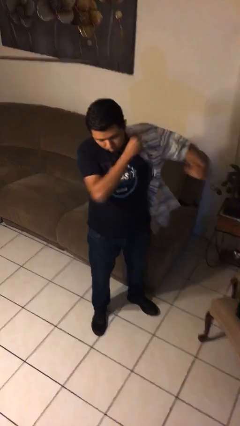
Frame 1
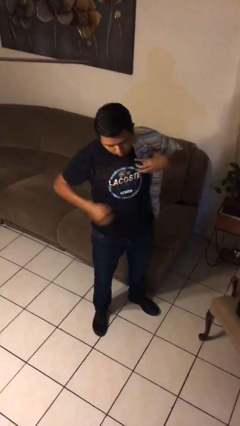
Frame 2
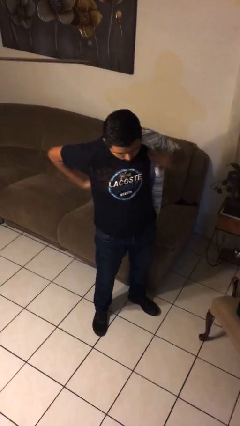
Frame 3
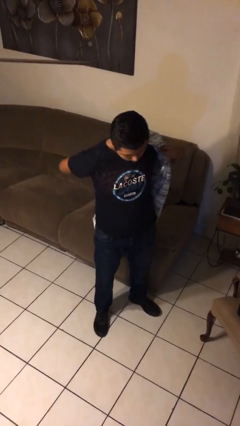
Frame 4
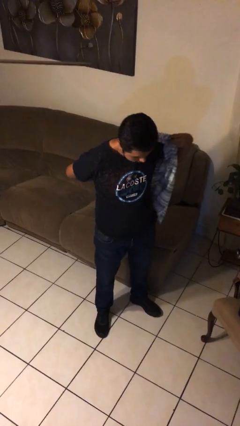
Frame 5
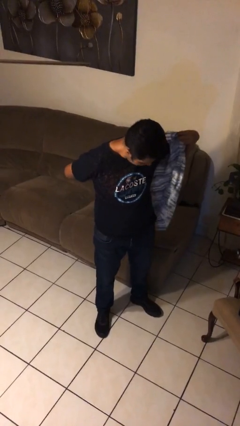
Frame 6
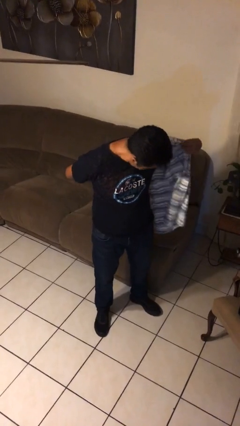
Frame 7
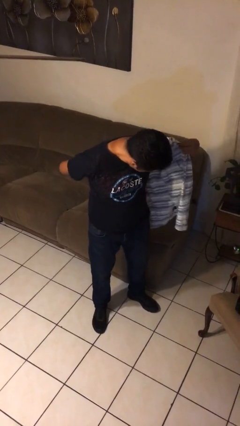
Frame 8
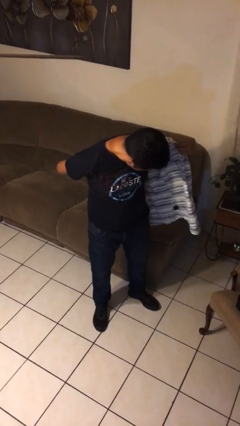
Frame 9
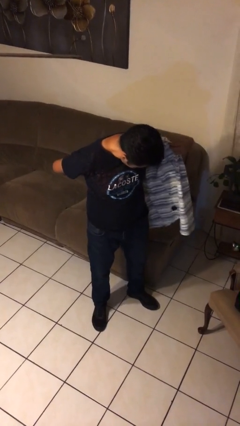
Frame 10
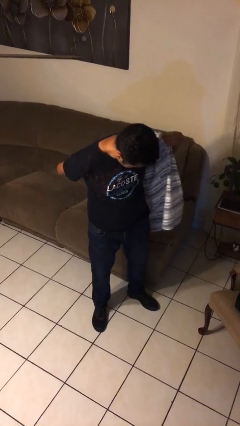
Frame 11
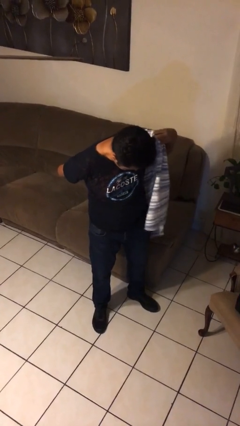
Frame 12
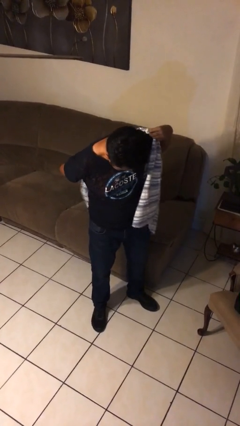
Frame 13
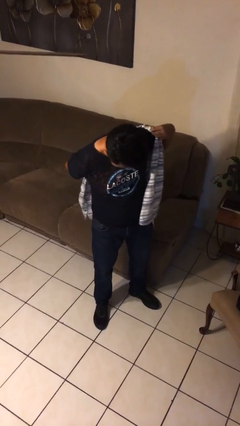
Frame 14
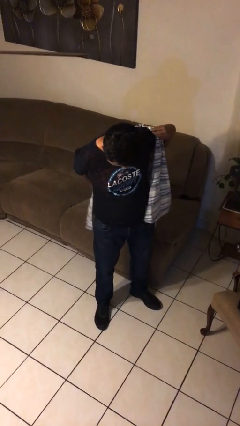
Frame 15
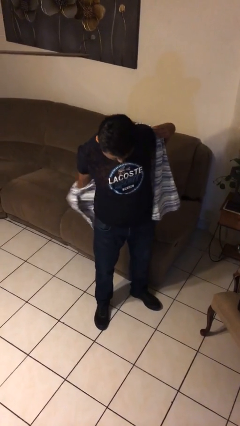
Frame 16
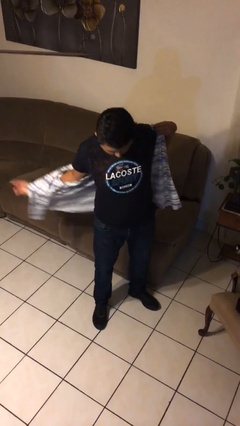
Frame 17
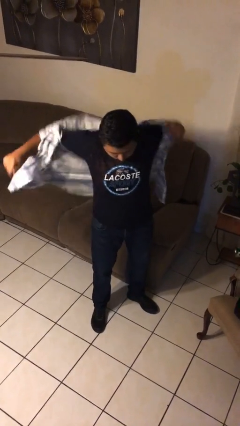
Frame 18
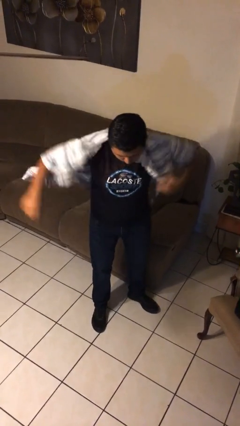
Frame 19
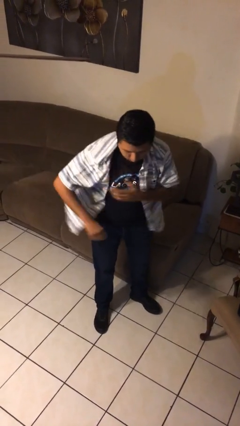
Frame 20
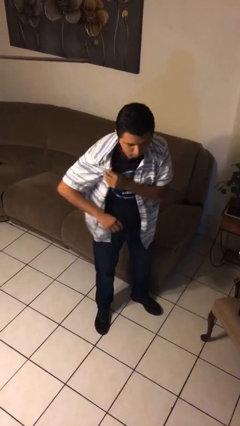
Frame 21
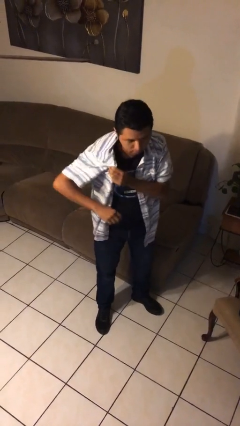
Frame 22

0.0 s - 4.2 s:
person puts on shirt

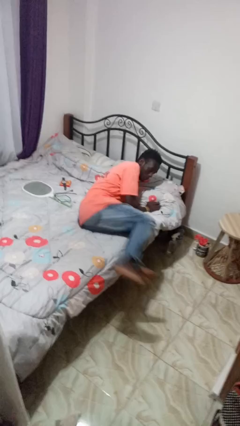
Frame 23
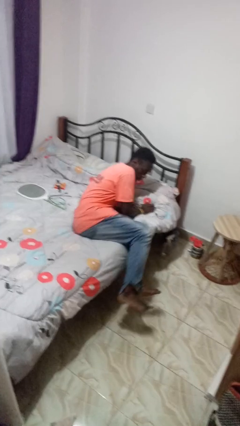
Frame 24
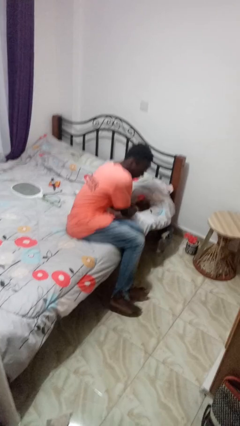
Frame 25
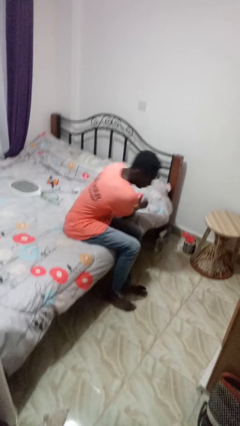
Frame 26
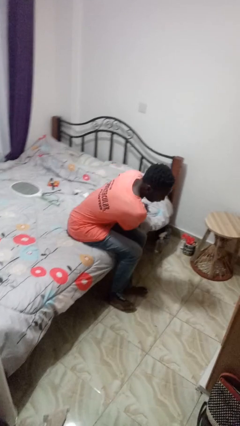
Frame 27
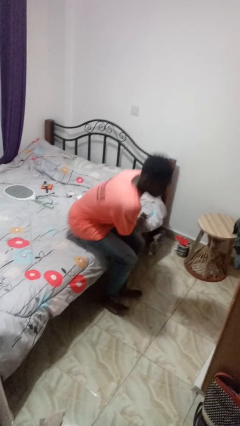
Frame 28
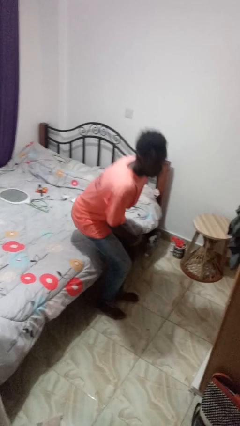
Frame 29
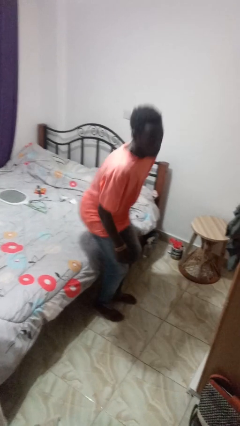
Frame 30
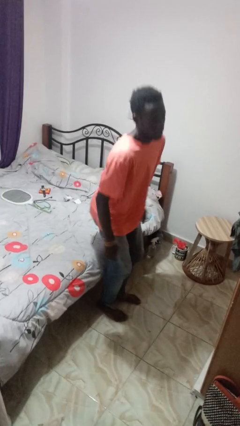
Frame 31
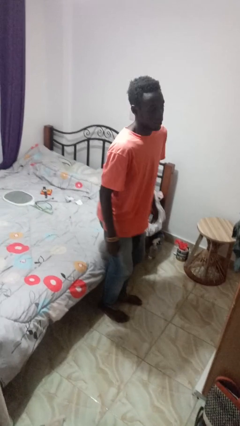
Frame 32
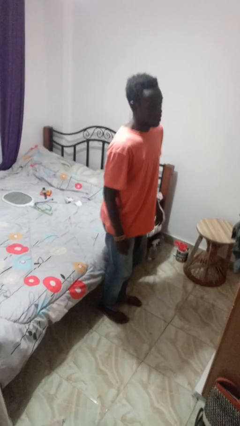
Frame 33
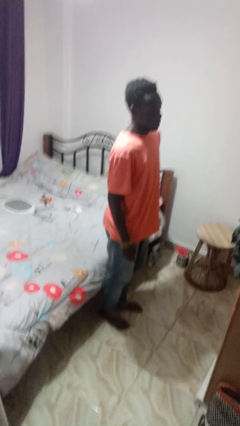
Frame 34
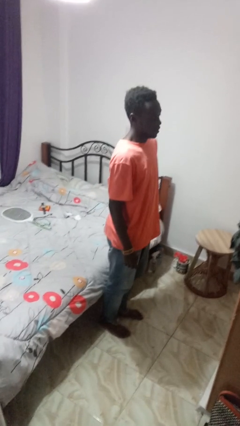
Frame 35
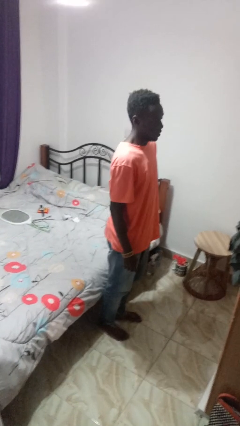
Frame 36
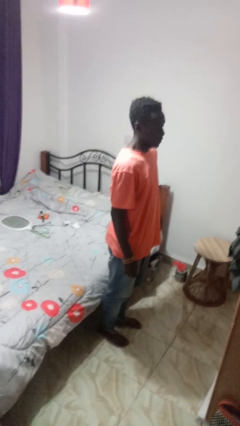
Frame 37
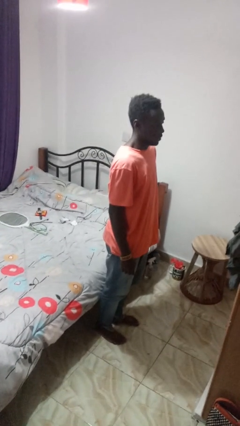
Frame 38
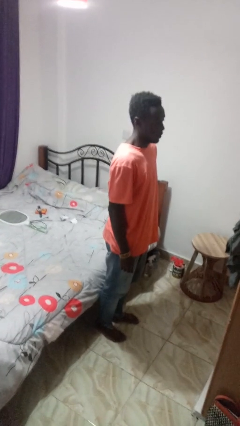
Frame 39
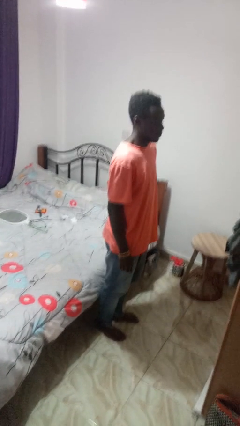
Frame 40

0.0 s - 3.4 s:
person stands up

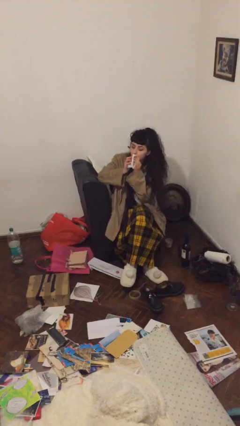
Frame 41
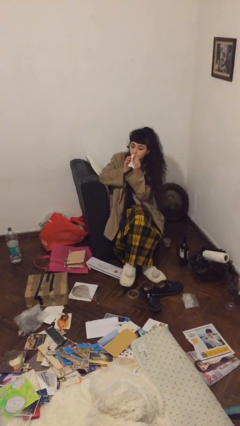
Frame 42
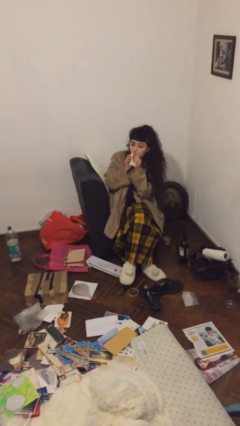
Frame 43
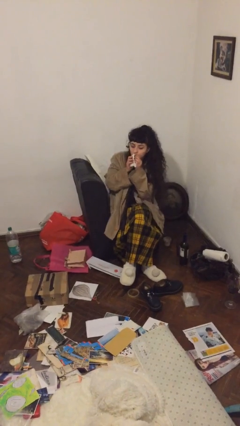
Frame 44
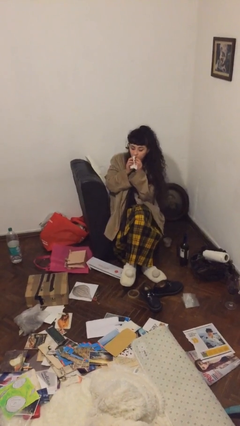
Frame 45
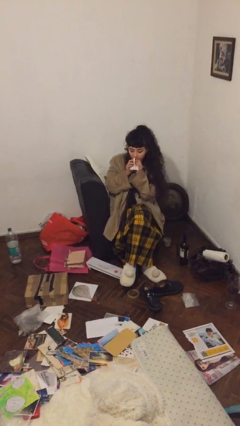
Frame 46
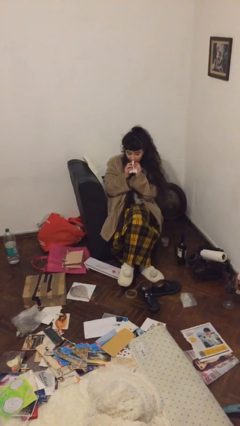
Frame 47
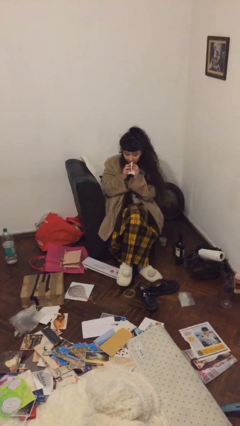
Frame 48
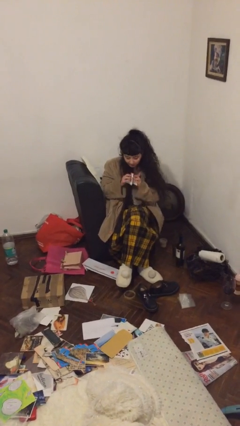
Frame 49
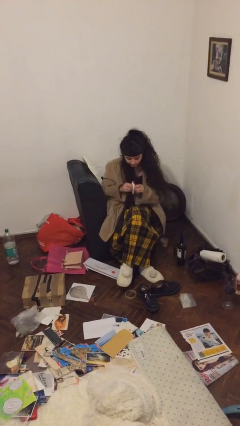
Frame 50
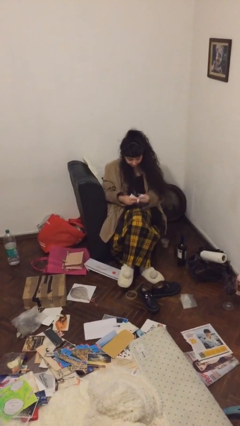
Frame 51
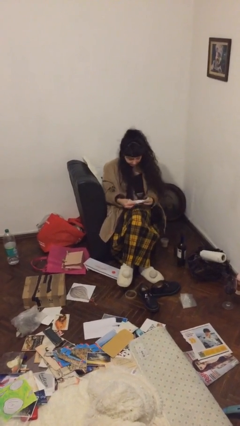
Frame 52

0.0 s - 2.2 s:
person wipes mouth with napkin

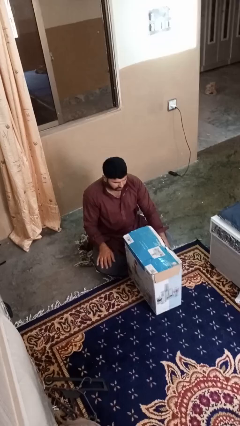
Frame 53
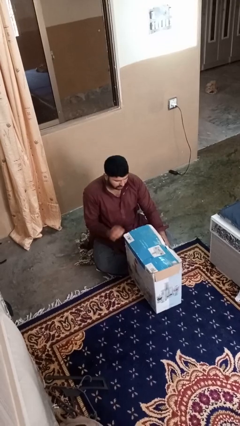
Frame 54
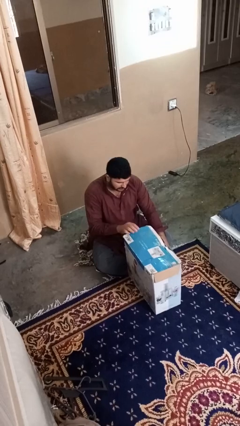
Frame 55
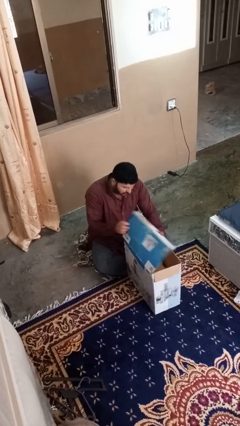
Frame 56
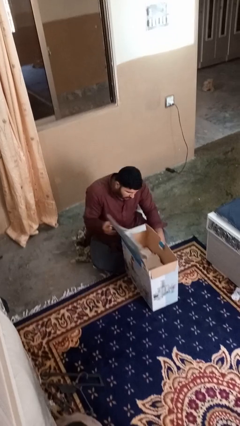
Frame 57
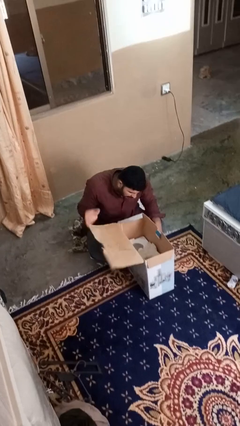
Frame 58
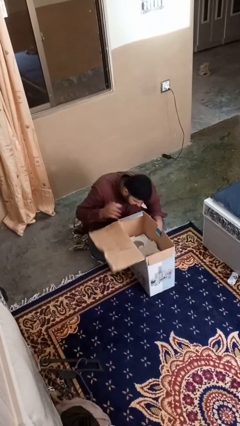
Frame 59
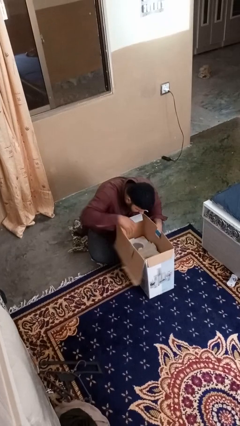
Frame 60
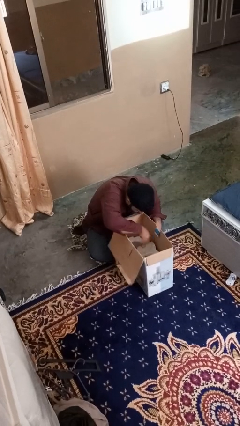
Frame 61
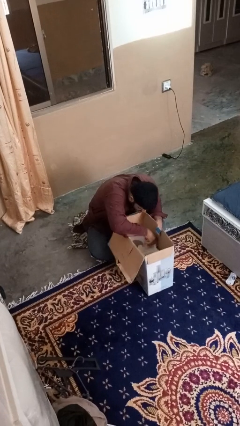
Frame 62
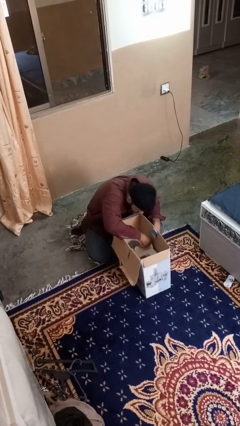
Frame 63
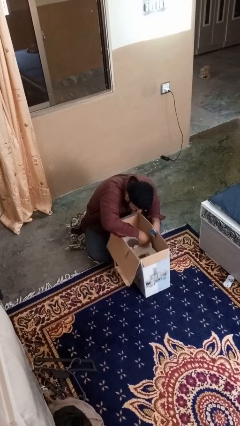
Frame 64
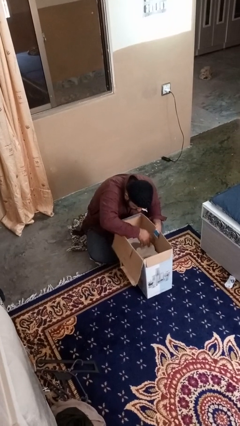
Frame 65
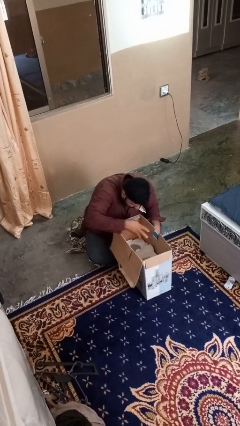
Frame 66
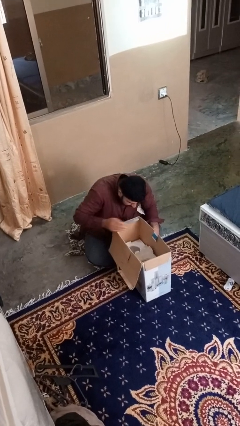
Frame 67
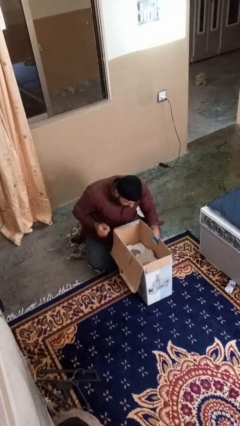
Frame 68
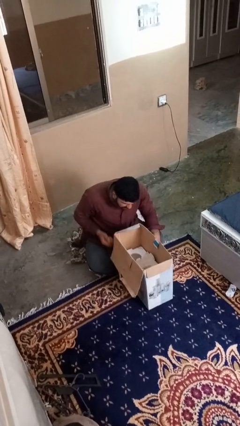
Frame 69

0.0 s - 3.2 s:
person searches in box

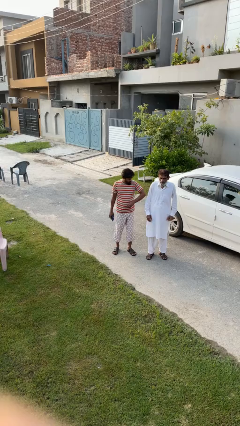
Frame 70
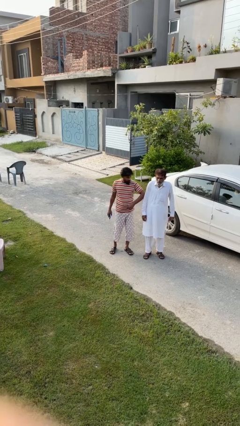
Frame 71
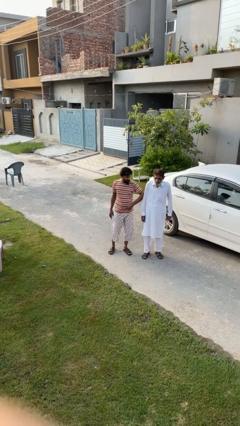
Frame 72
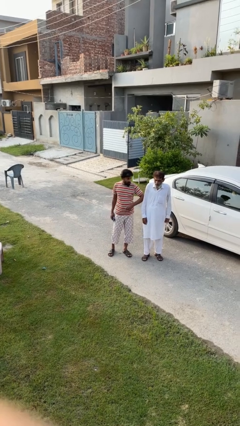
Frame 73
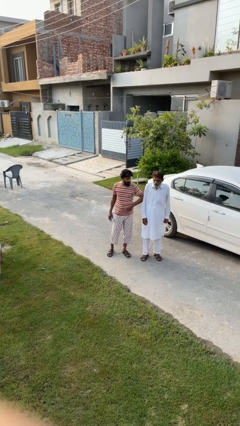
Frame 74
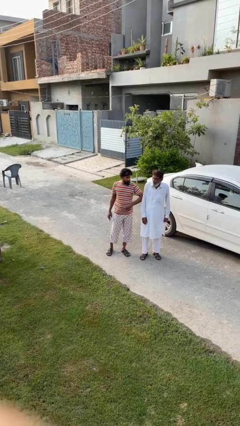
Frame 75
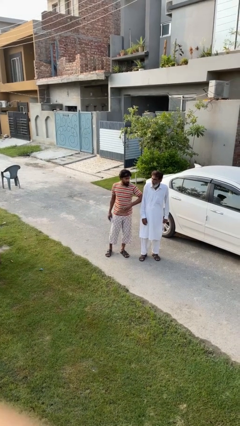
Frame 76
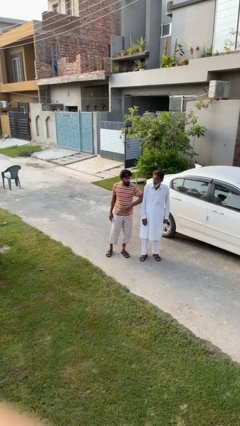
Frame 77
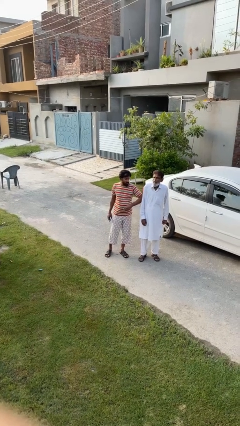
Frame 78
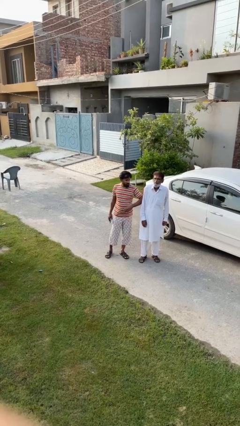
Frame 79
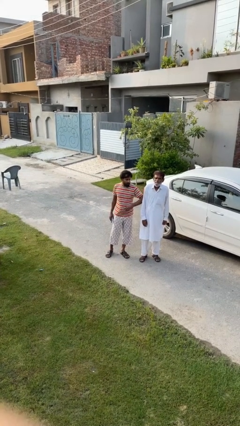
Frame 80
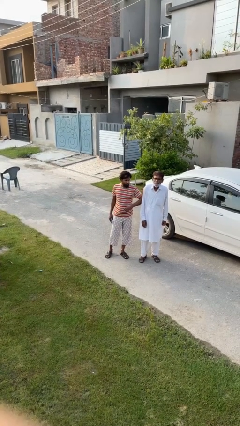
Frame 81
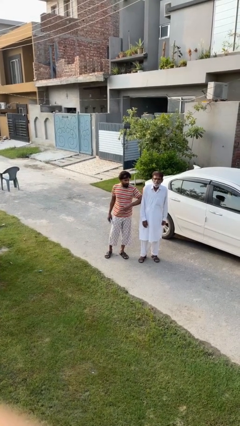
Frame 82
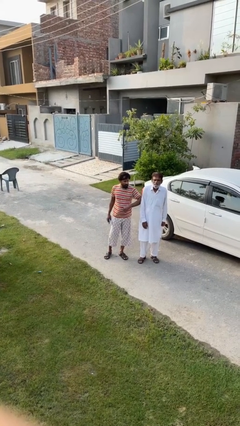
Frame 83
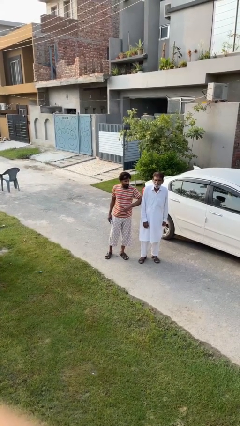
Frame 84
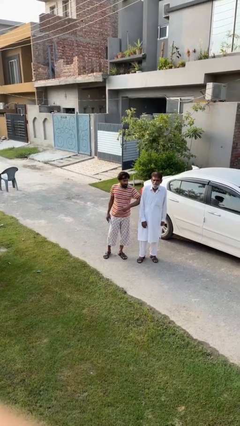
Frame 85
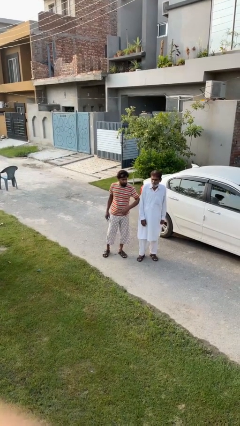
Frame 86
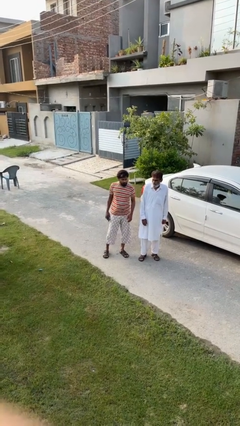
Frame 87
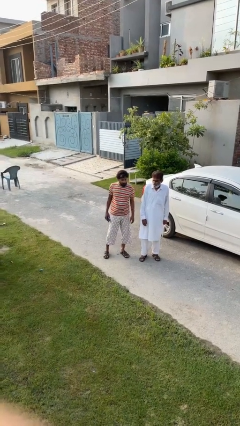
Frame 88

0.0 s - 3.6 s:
person nudges person with elbow

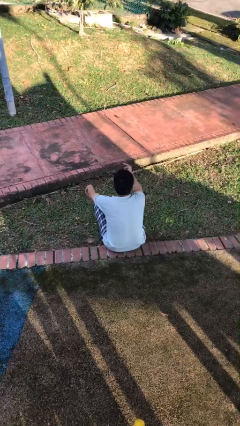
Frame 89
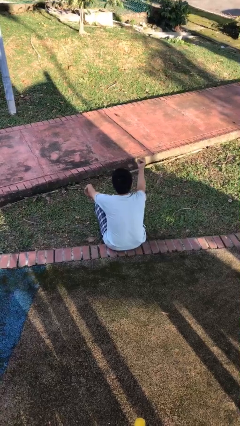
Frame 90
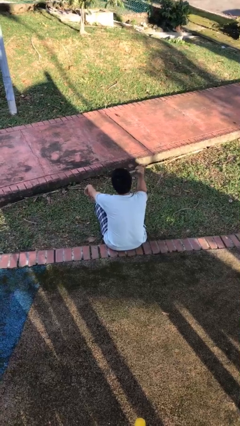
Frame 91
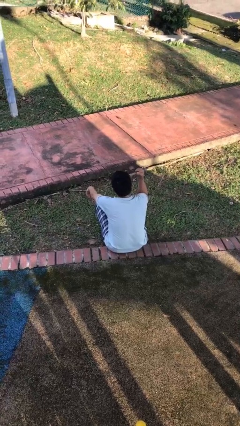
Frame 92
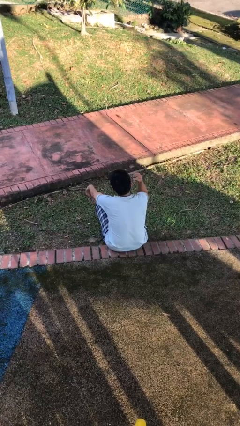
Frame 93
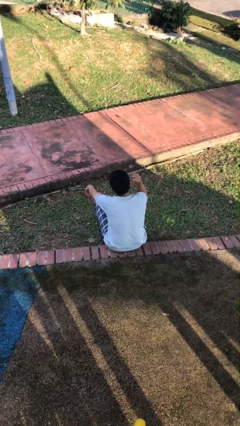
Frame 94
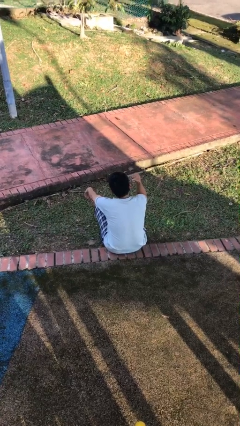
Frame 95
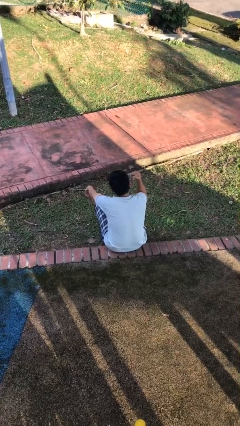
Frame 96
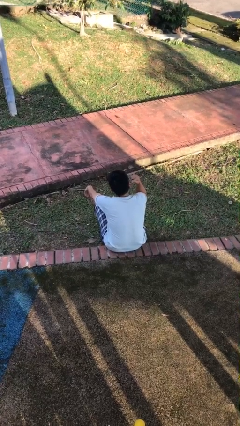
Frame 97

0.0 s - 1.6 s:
person gestures listen closely
